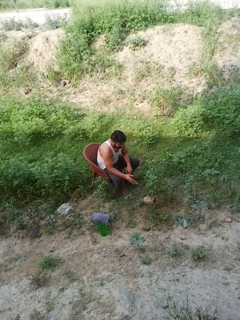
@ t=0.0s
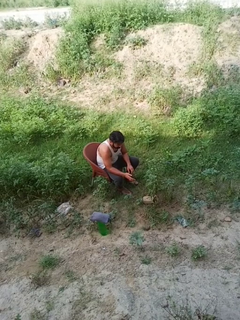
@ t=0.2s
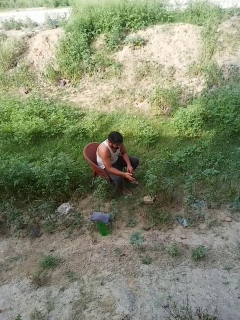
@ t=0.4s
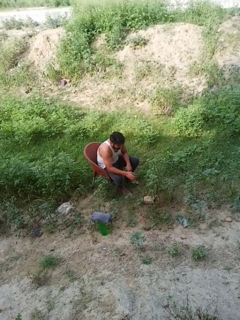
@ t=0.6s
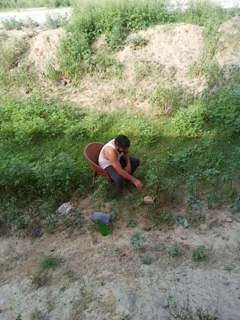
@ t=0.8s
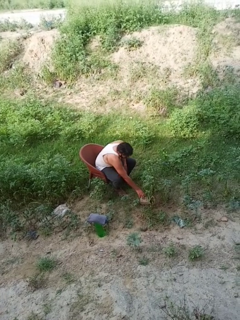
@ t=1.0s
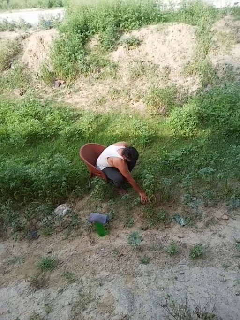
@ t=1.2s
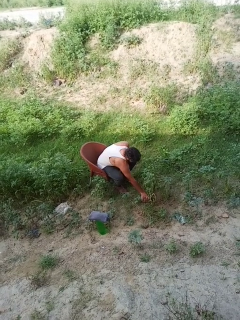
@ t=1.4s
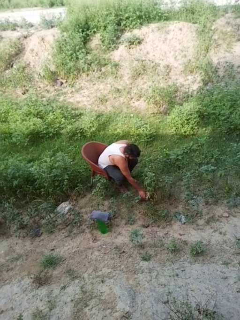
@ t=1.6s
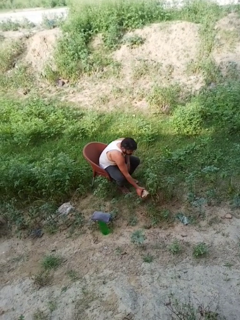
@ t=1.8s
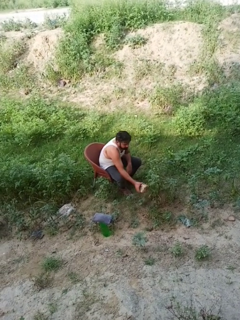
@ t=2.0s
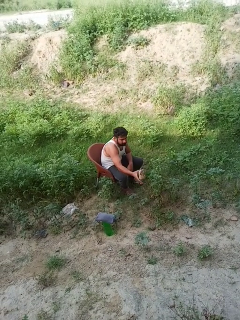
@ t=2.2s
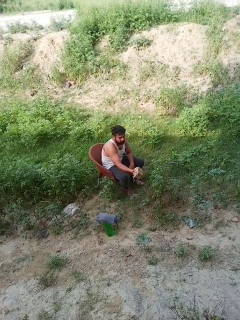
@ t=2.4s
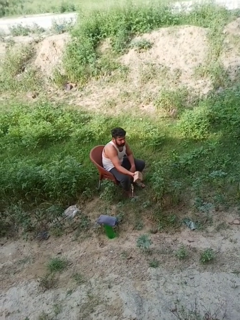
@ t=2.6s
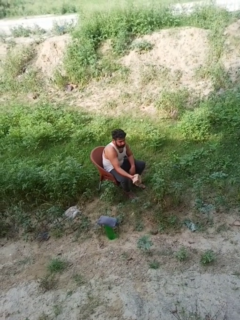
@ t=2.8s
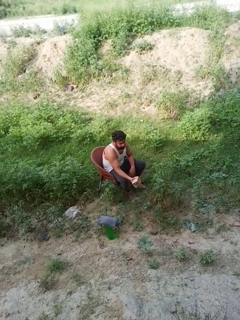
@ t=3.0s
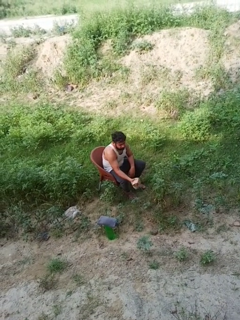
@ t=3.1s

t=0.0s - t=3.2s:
person picks up object from floor

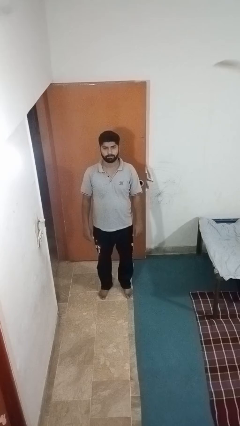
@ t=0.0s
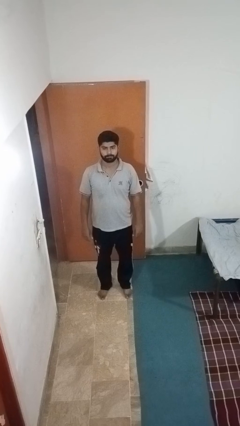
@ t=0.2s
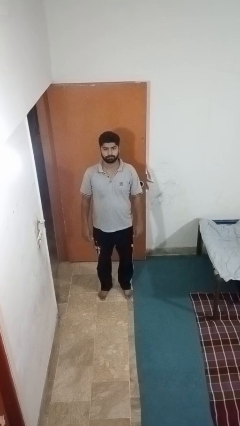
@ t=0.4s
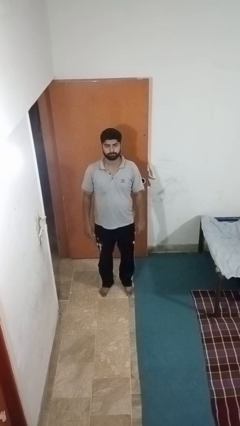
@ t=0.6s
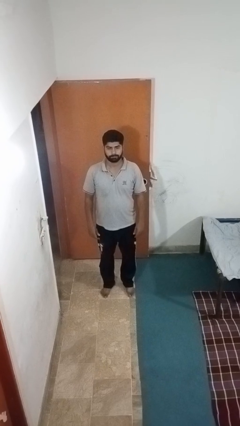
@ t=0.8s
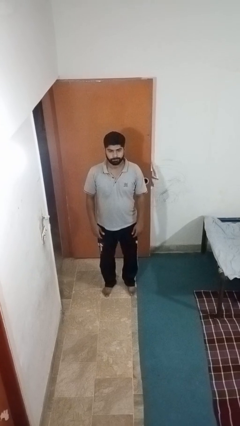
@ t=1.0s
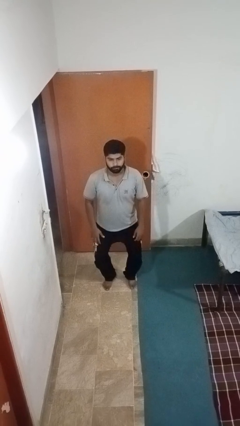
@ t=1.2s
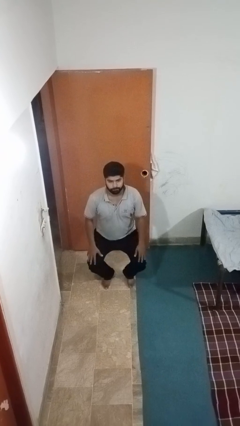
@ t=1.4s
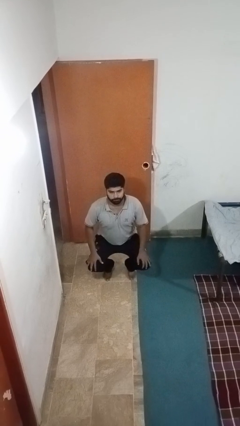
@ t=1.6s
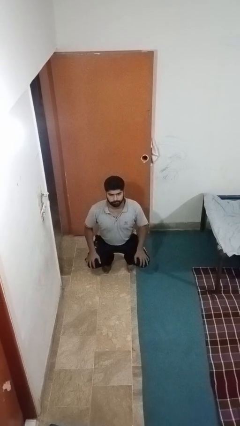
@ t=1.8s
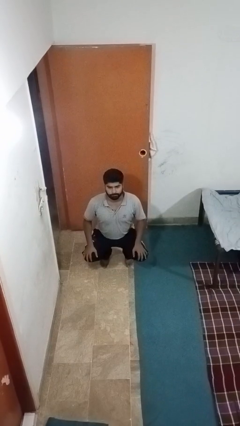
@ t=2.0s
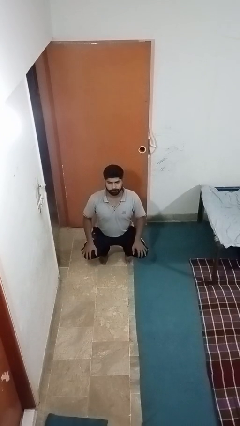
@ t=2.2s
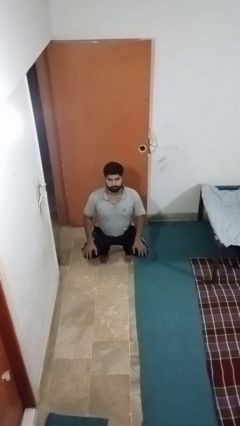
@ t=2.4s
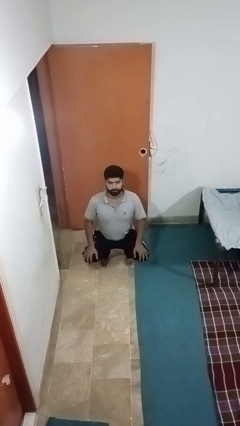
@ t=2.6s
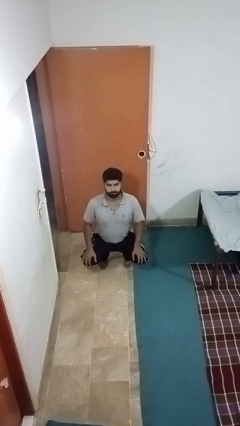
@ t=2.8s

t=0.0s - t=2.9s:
person squats

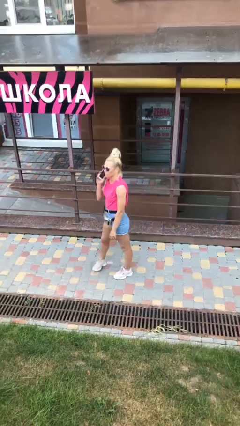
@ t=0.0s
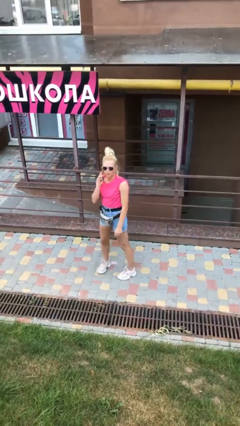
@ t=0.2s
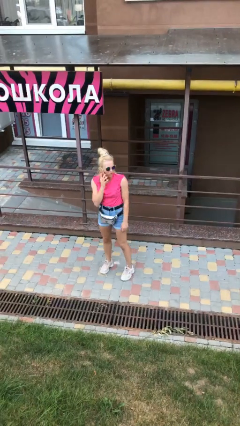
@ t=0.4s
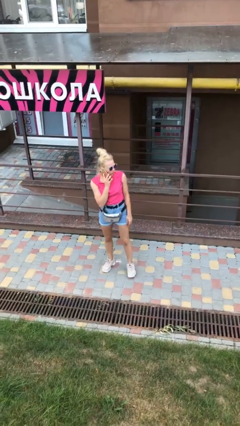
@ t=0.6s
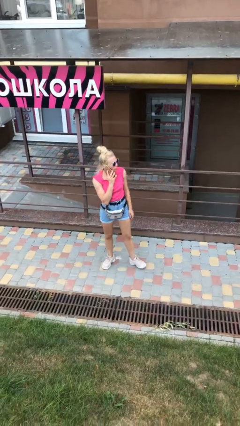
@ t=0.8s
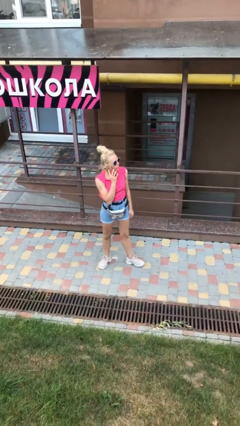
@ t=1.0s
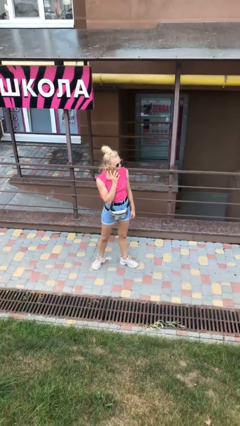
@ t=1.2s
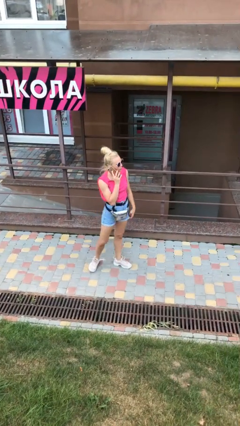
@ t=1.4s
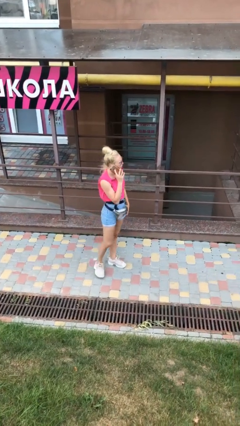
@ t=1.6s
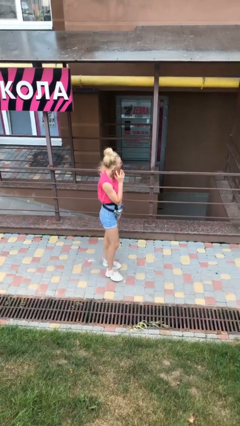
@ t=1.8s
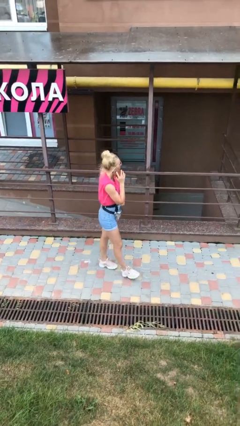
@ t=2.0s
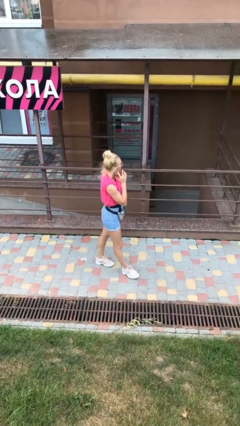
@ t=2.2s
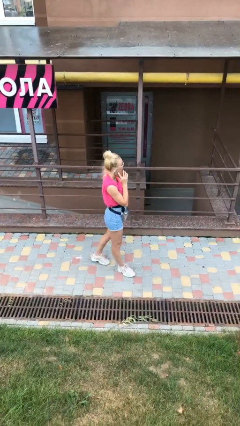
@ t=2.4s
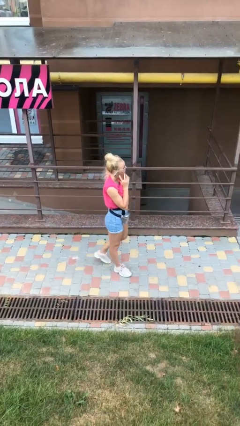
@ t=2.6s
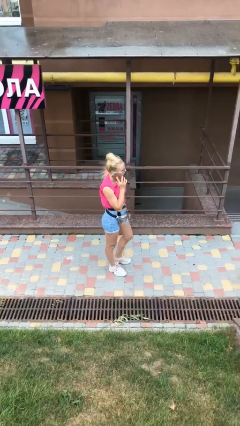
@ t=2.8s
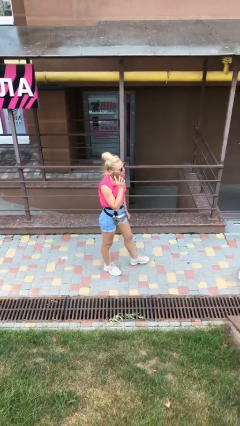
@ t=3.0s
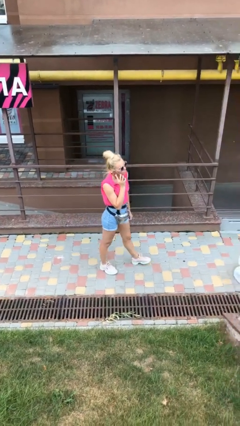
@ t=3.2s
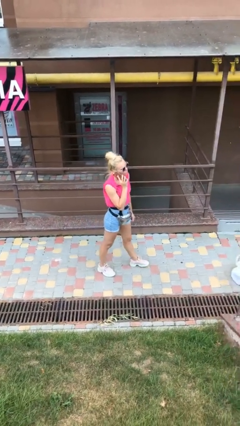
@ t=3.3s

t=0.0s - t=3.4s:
person talks on phone

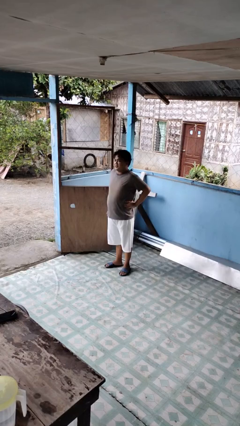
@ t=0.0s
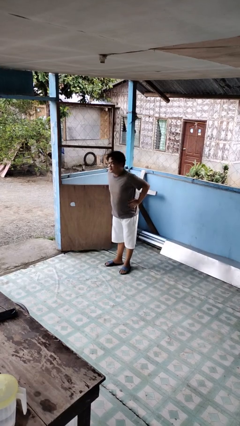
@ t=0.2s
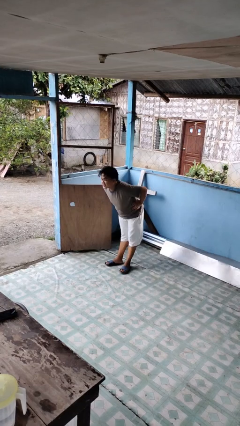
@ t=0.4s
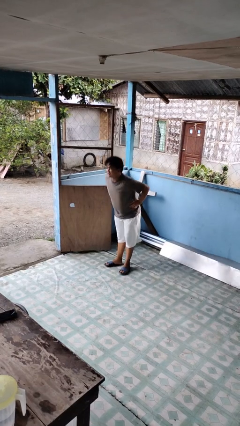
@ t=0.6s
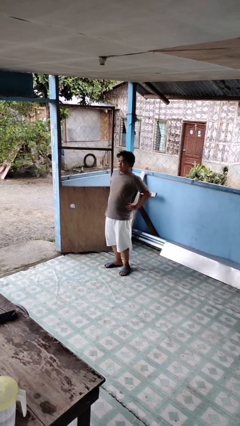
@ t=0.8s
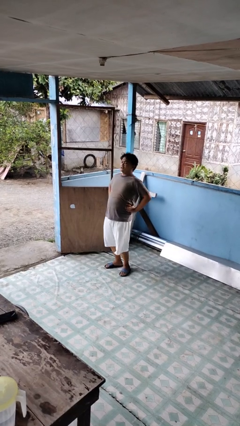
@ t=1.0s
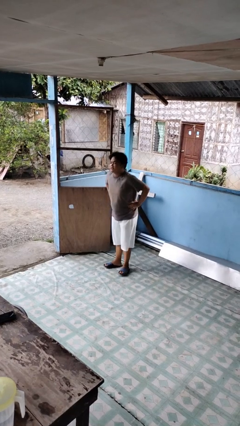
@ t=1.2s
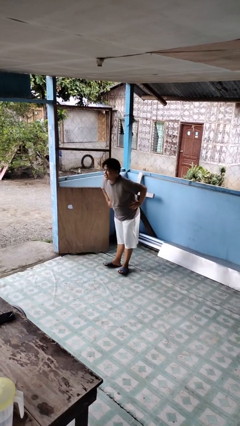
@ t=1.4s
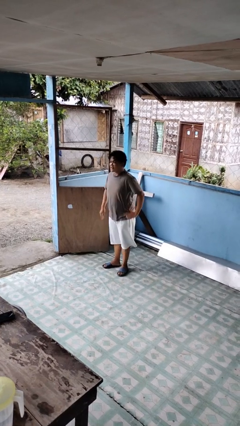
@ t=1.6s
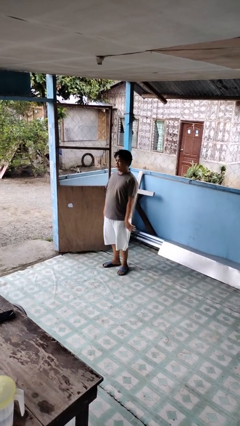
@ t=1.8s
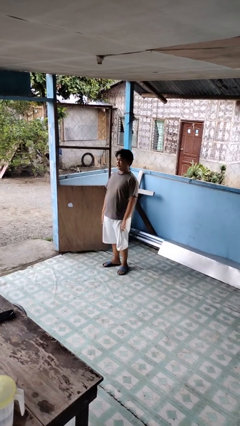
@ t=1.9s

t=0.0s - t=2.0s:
person wiggles hips

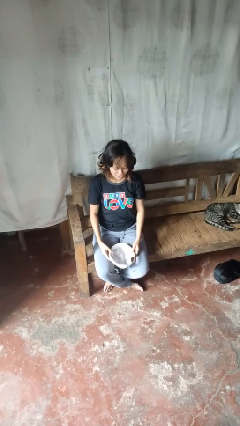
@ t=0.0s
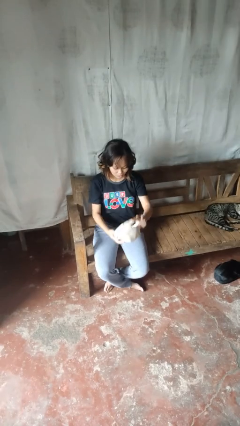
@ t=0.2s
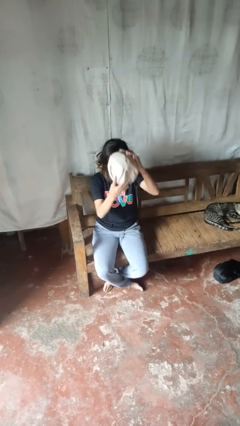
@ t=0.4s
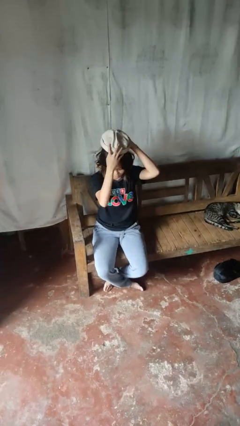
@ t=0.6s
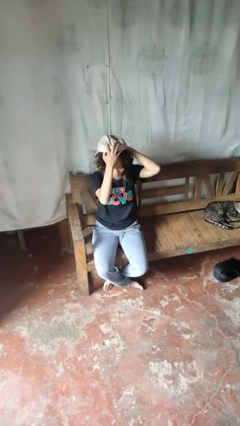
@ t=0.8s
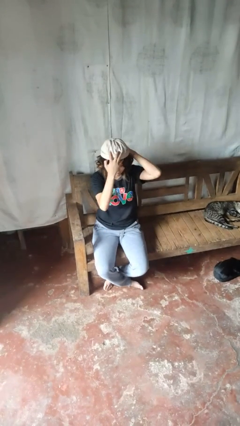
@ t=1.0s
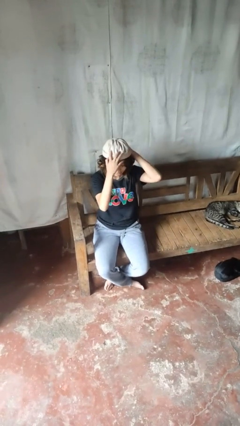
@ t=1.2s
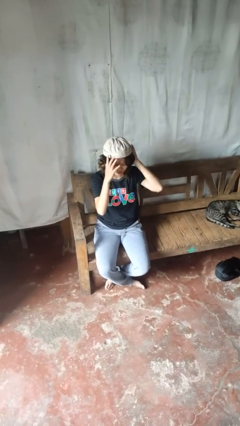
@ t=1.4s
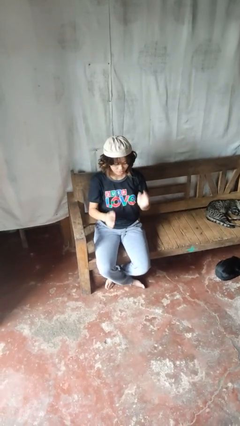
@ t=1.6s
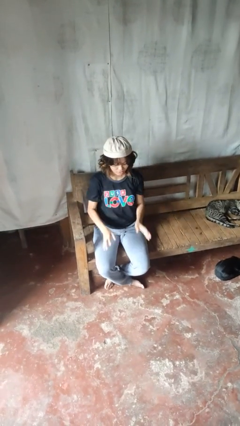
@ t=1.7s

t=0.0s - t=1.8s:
person puts on hat

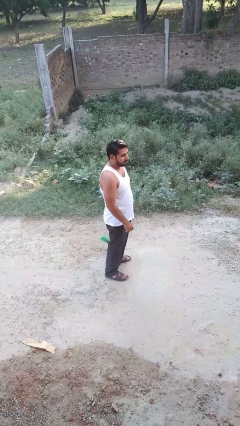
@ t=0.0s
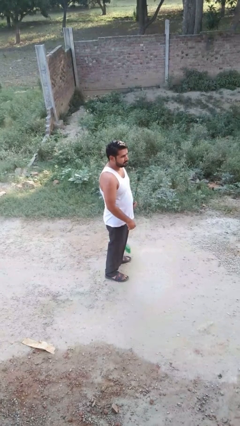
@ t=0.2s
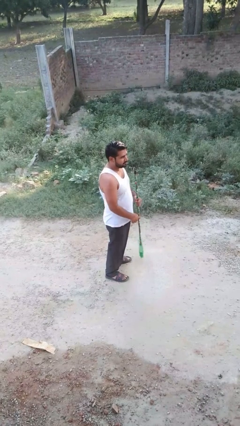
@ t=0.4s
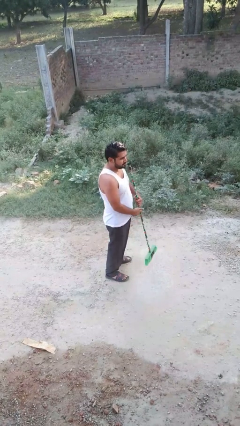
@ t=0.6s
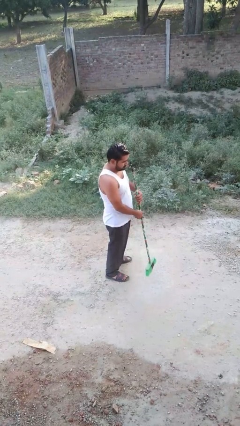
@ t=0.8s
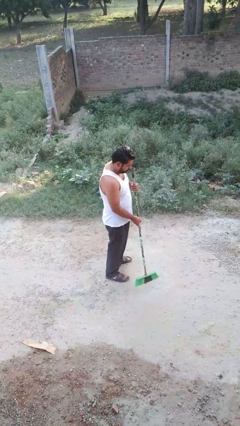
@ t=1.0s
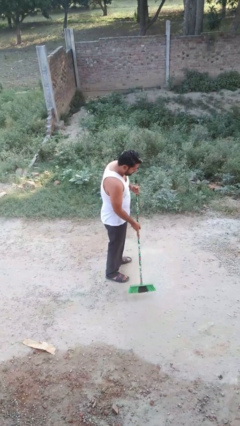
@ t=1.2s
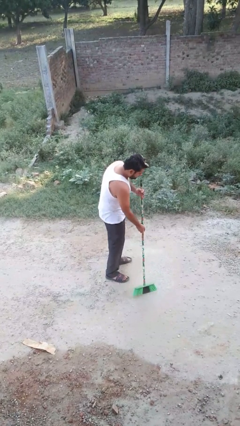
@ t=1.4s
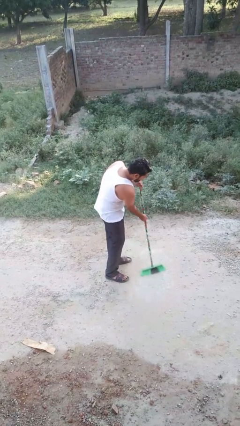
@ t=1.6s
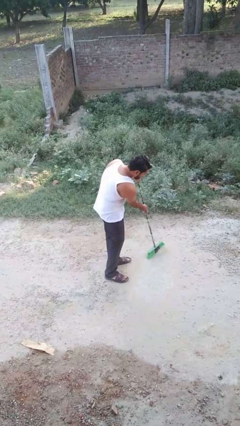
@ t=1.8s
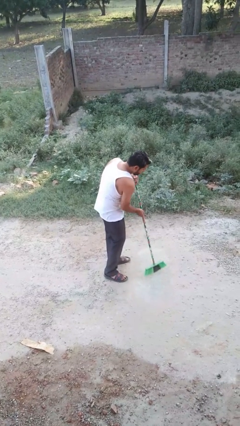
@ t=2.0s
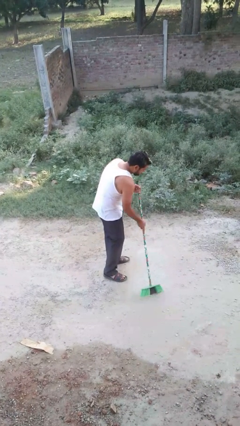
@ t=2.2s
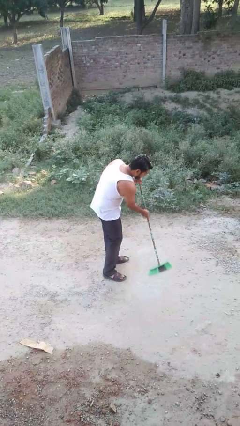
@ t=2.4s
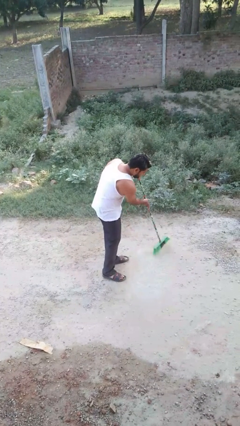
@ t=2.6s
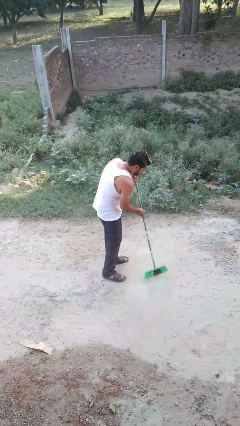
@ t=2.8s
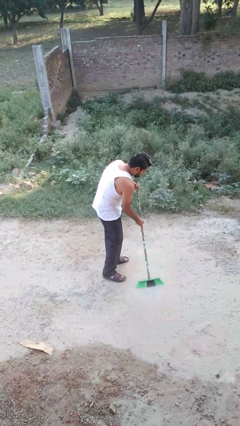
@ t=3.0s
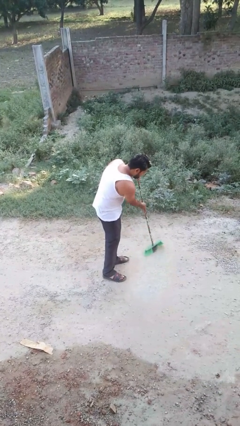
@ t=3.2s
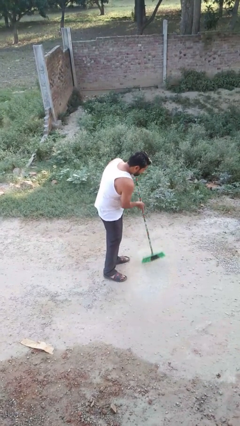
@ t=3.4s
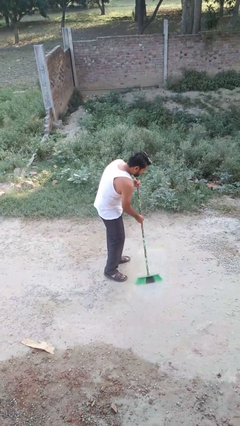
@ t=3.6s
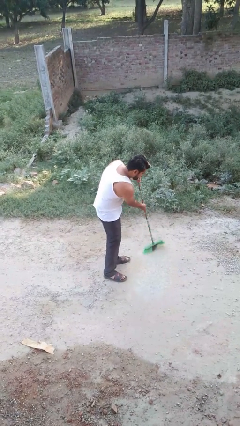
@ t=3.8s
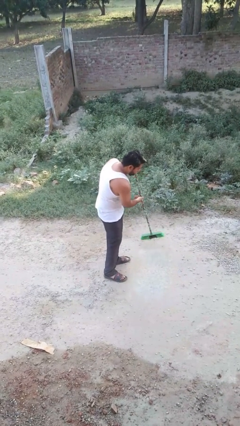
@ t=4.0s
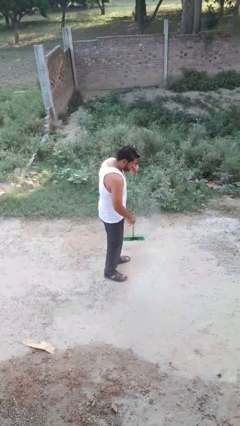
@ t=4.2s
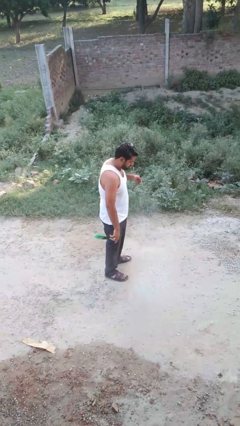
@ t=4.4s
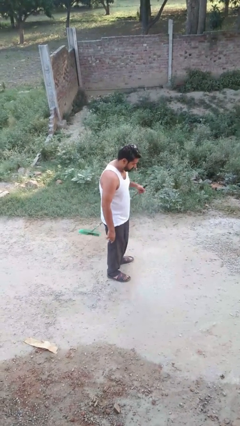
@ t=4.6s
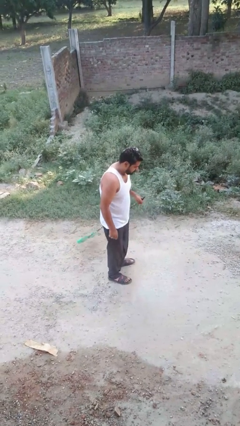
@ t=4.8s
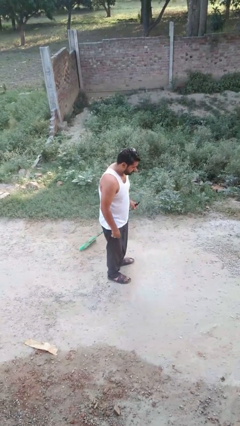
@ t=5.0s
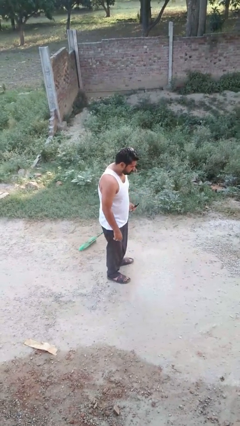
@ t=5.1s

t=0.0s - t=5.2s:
person sweeps floor
